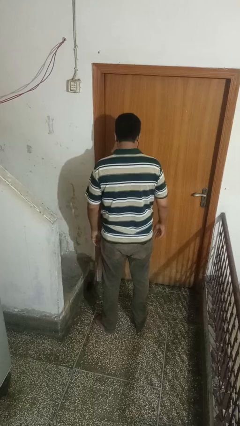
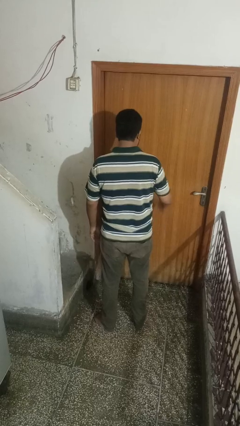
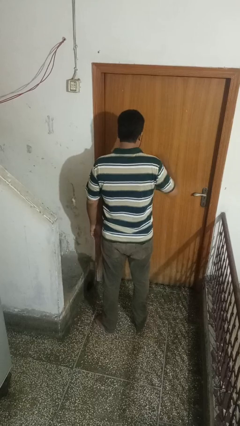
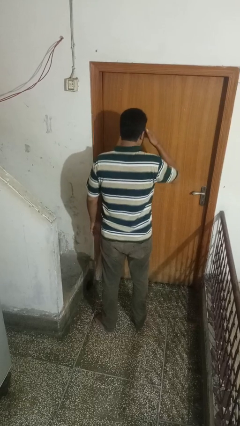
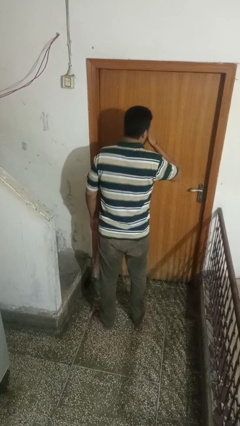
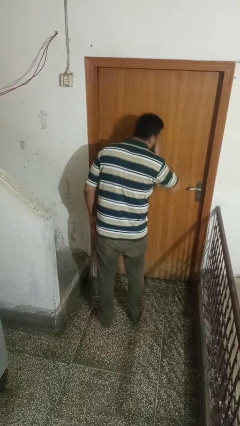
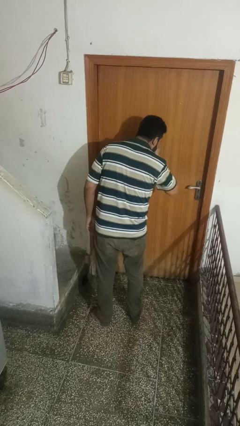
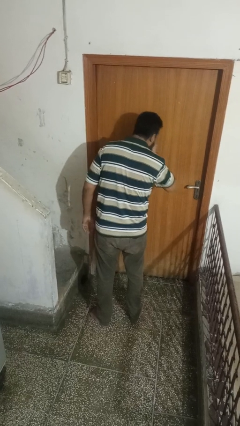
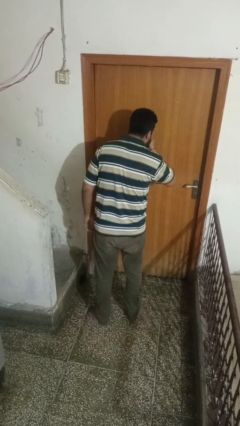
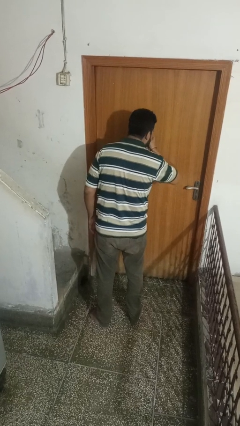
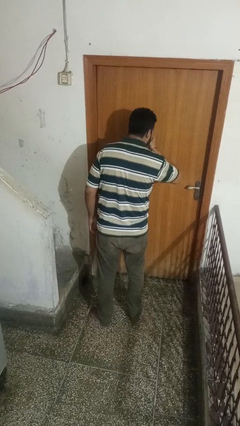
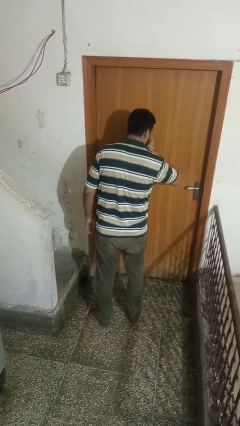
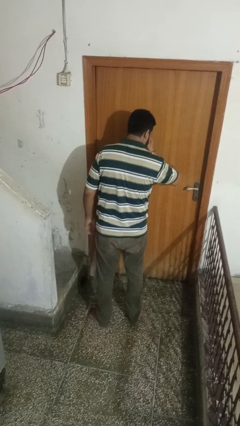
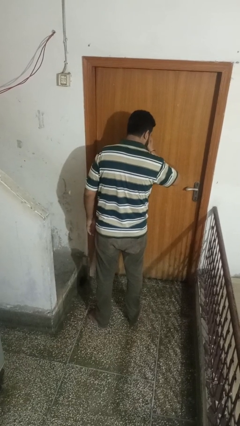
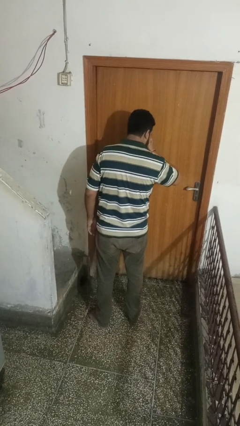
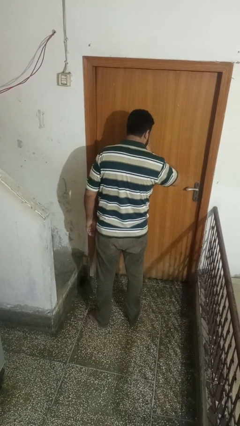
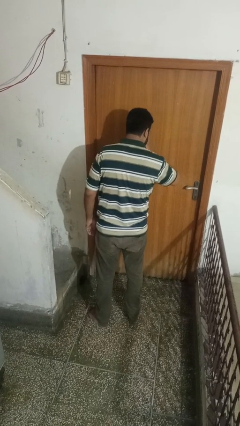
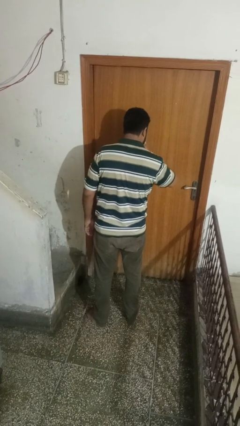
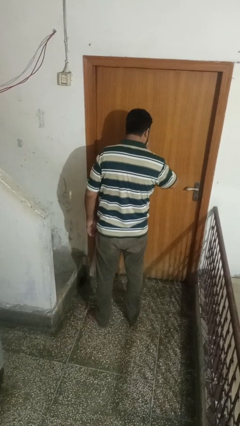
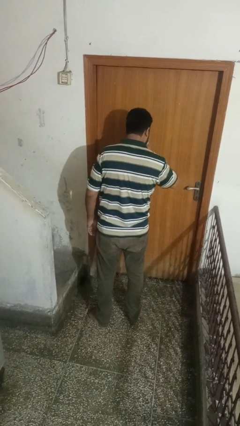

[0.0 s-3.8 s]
person sneezes into hand

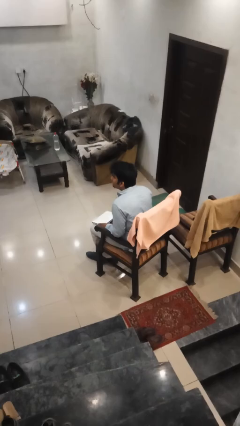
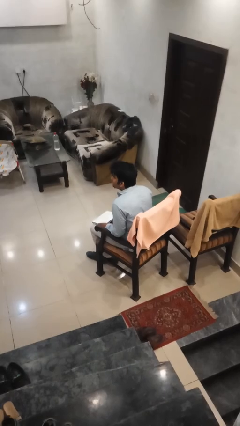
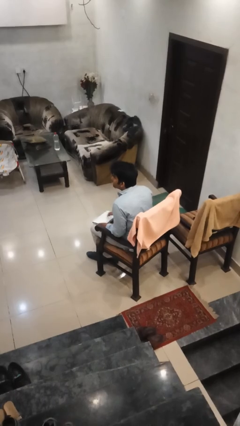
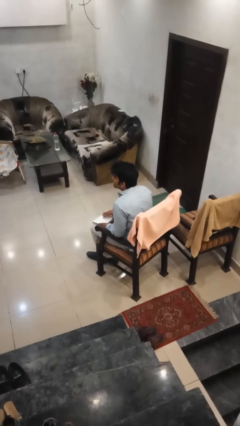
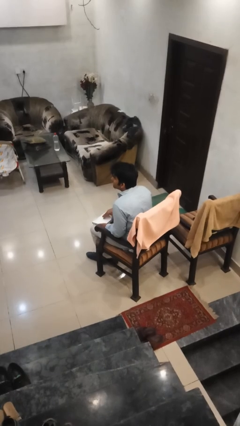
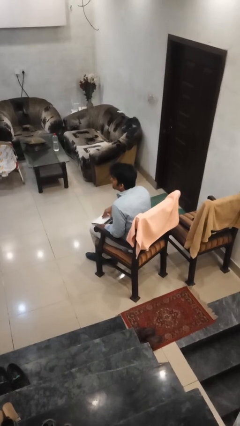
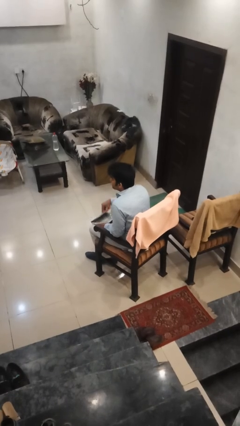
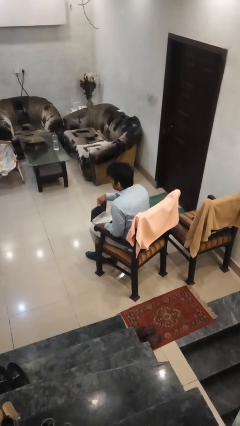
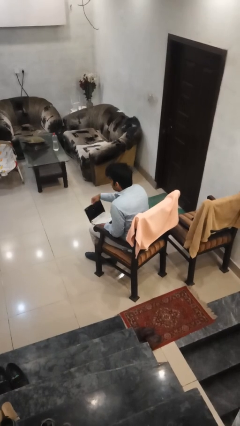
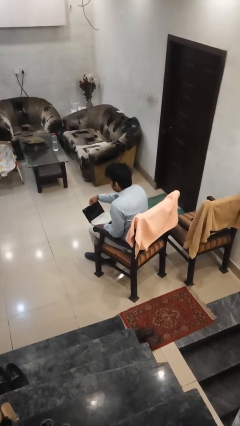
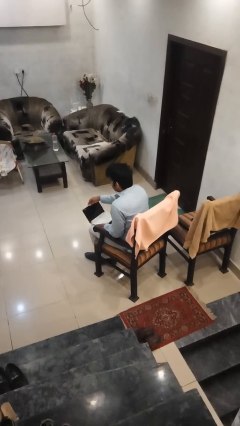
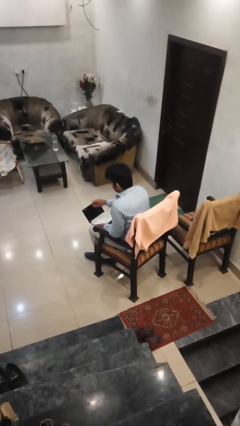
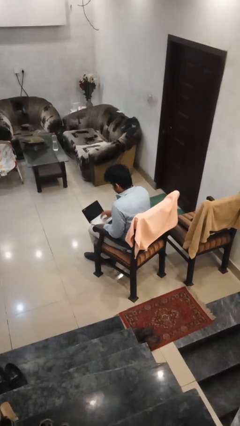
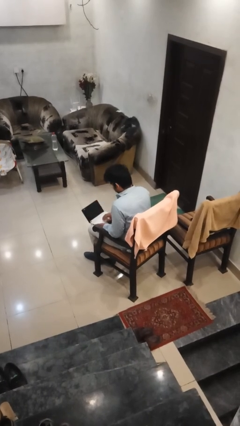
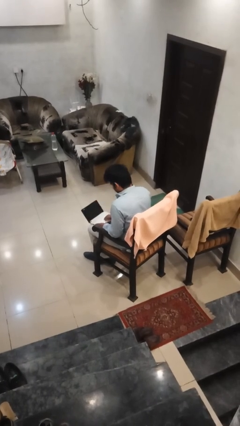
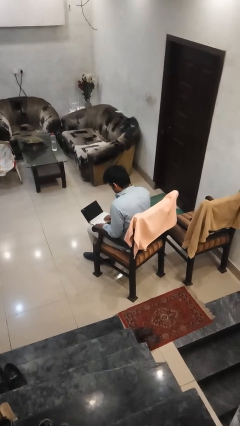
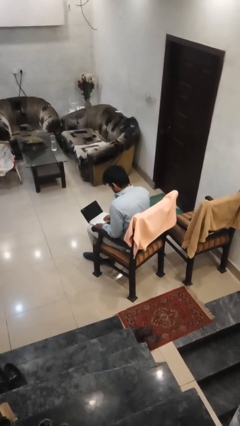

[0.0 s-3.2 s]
person interacts with laptop

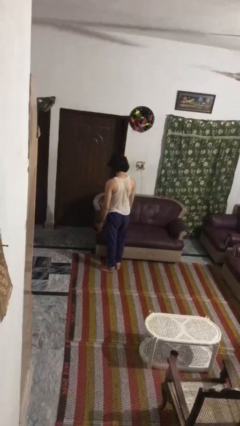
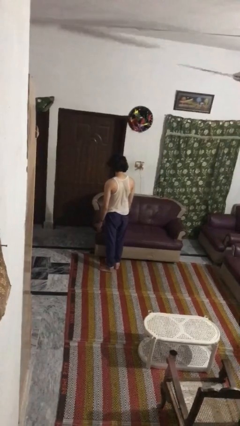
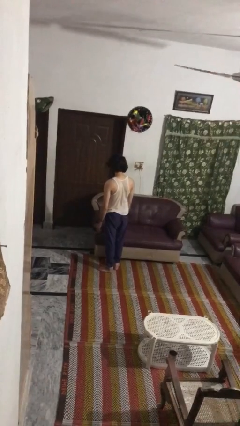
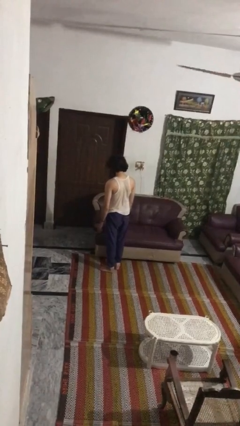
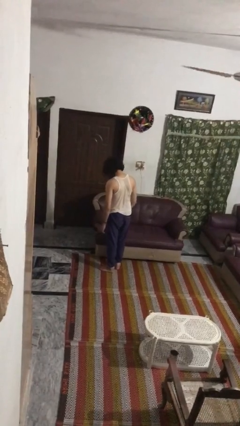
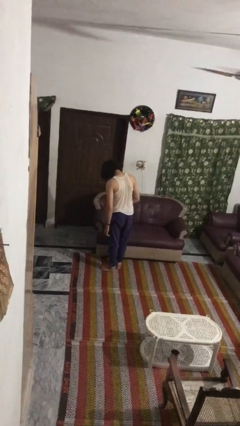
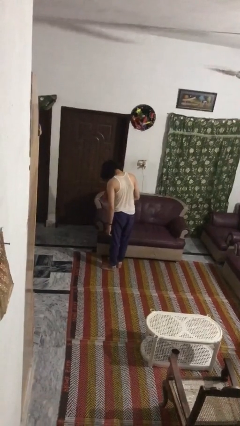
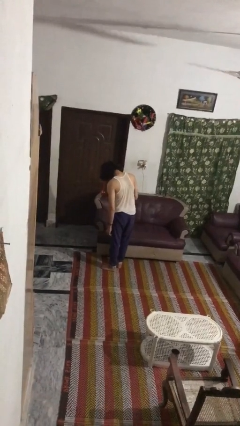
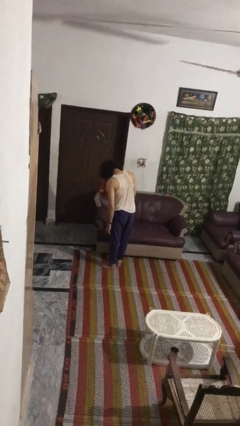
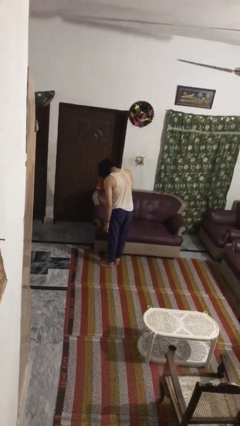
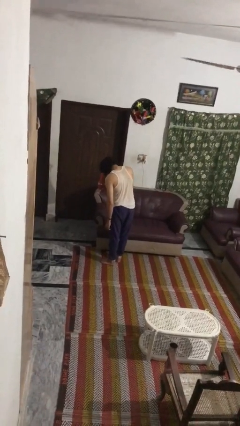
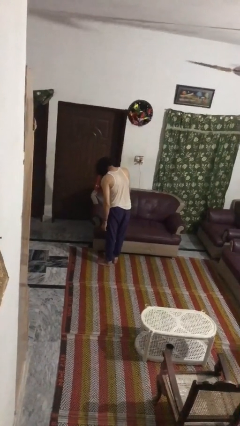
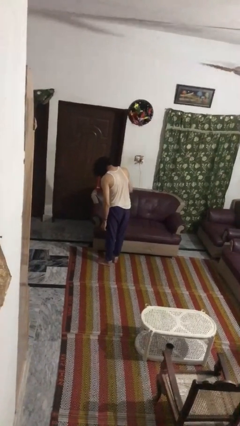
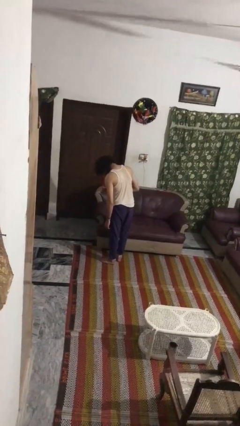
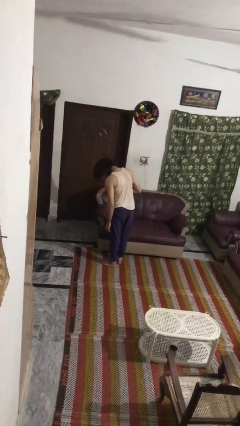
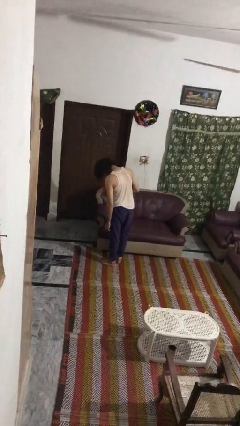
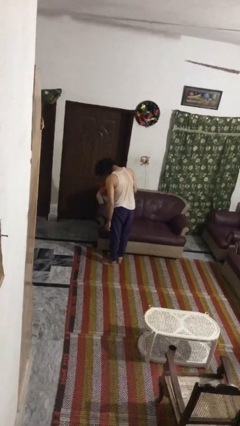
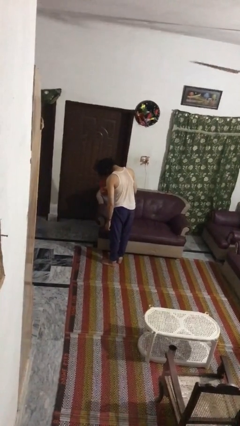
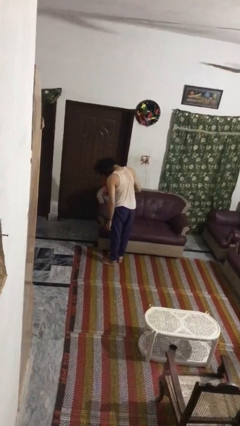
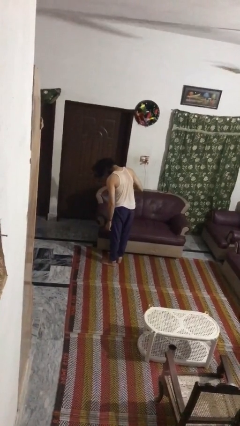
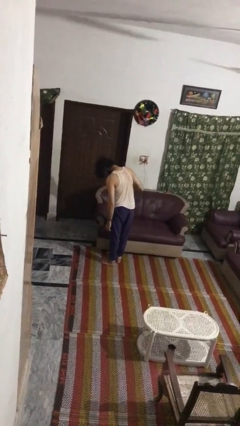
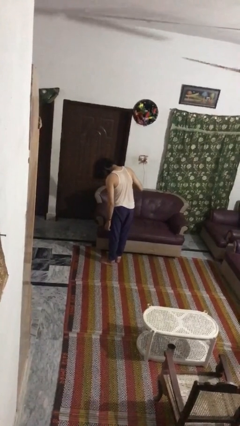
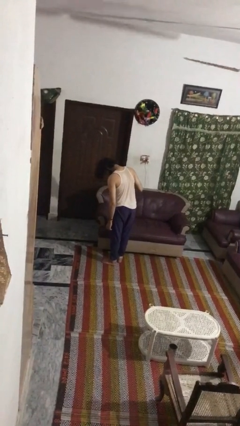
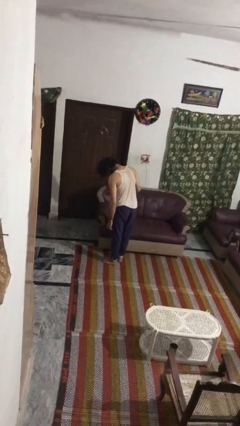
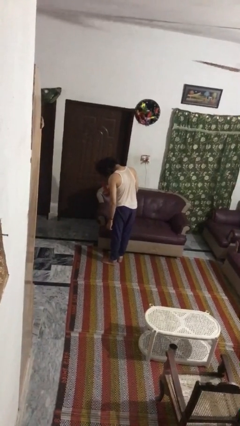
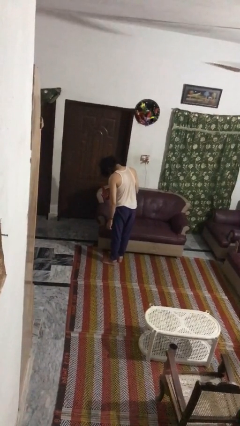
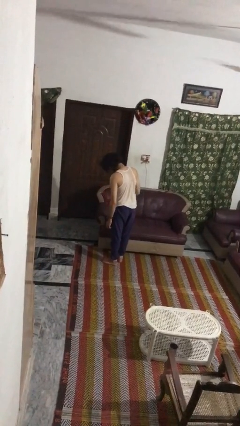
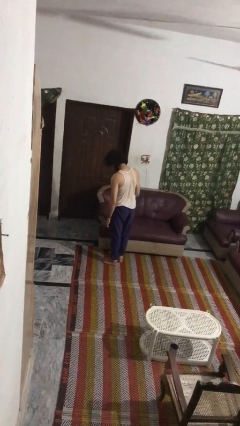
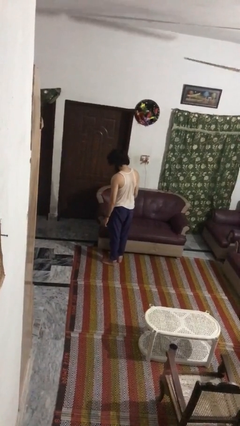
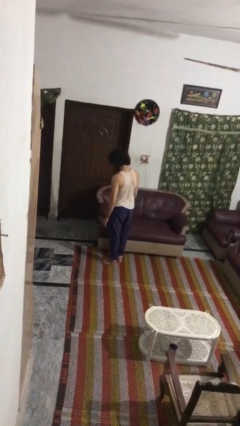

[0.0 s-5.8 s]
person dries hair with hairdryer

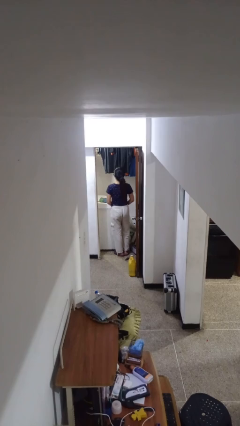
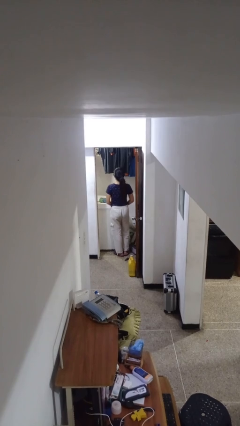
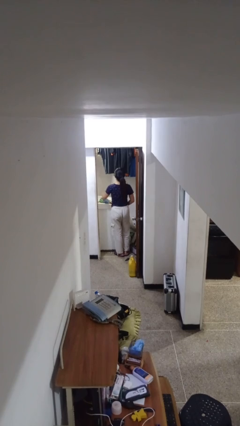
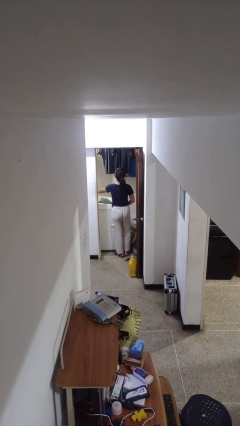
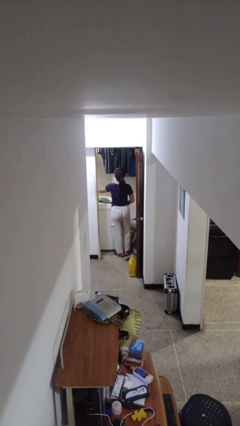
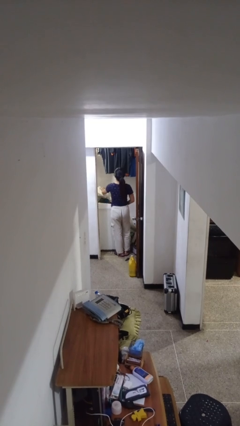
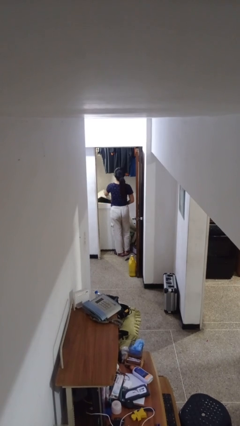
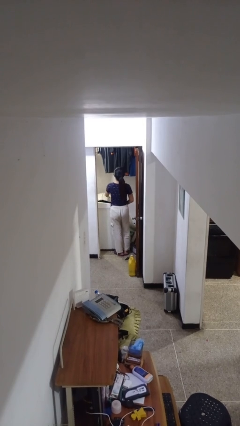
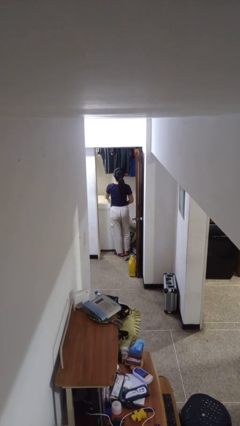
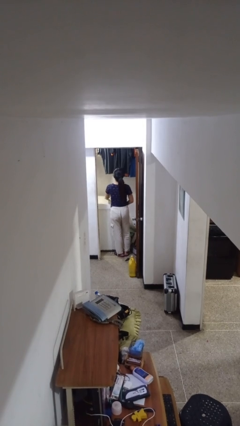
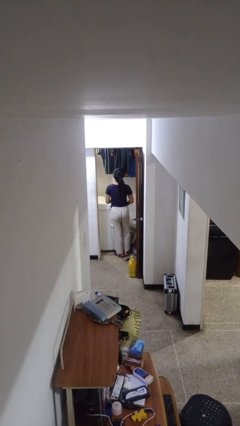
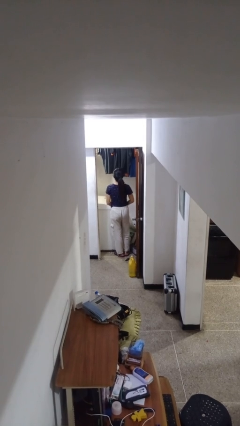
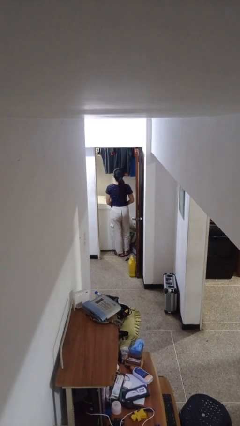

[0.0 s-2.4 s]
person closes clothes washer

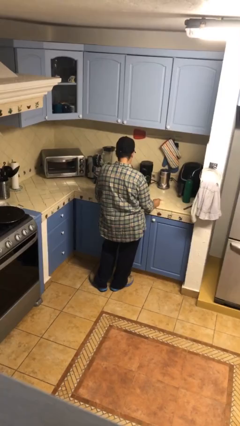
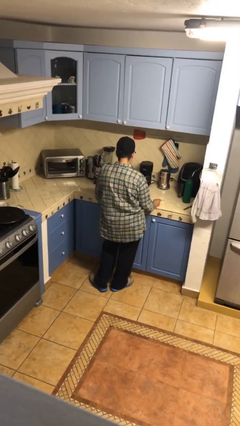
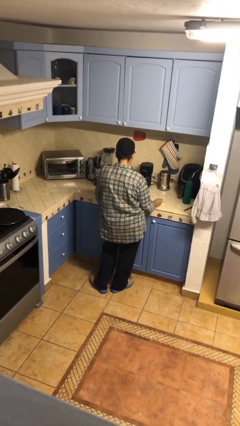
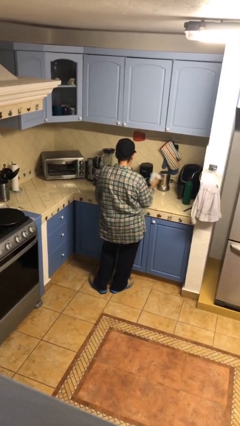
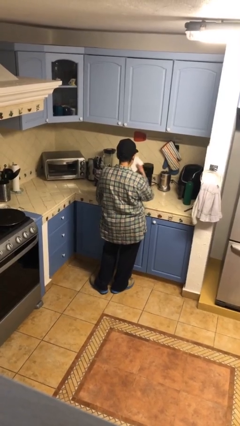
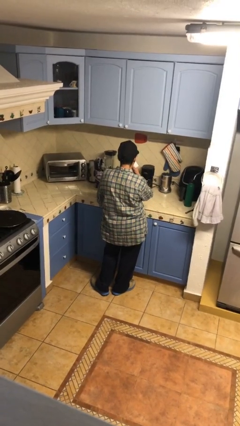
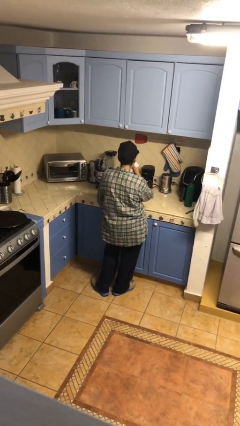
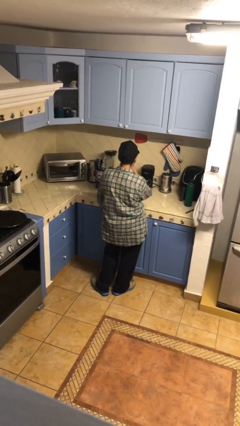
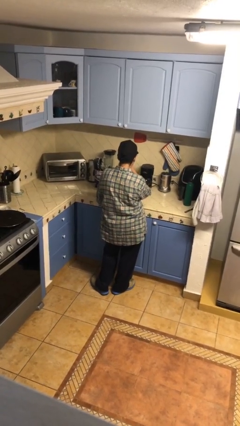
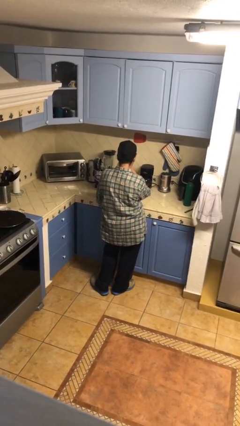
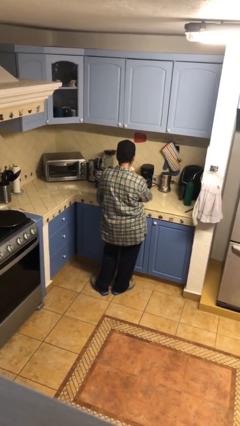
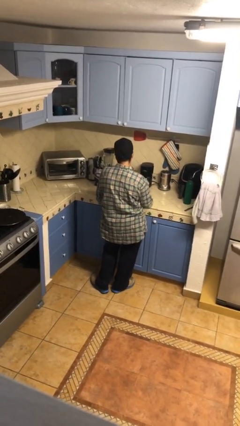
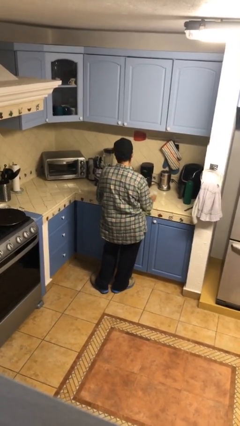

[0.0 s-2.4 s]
person wipes mouth with napkin
